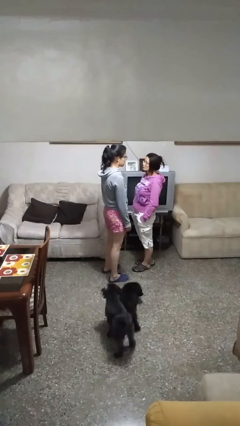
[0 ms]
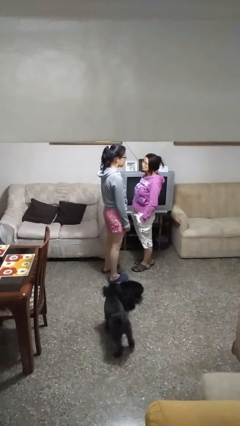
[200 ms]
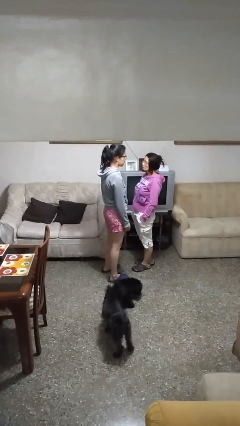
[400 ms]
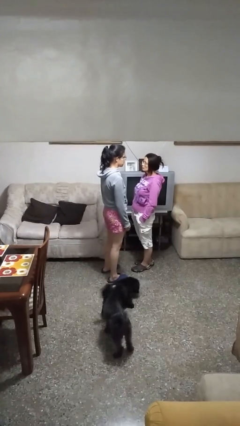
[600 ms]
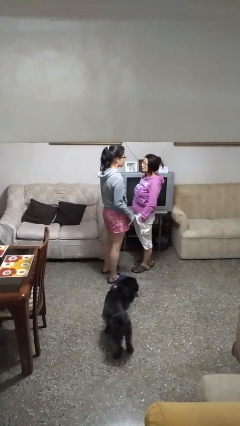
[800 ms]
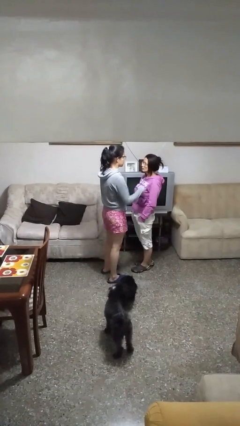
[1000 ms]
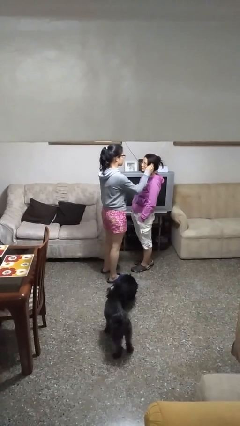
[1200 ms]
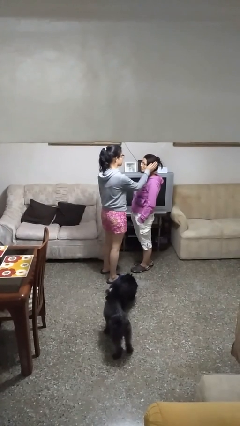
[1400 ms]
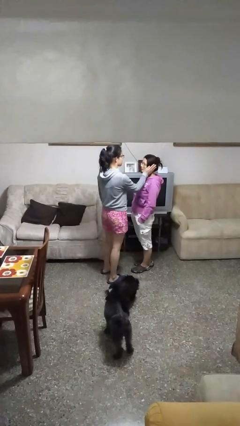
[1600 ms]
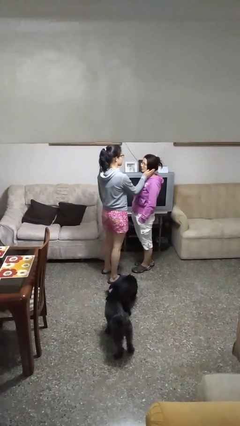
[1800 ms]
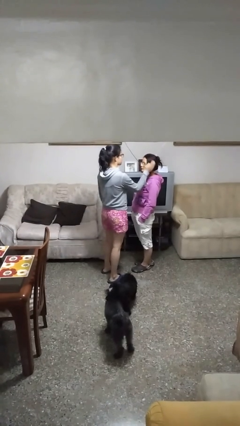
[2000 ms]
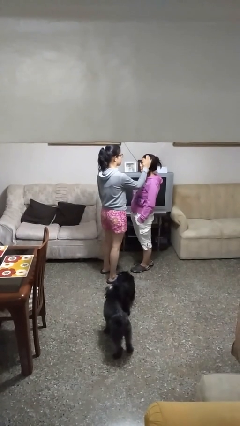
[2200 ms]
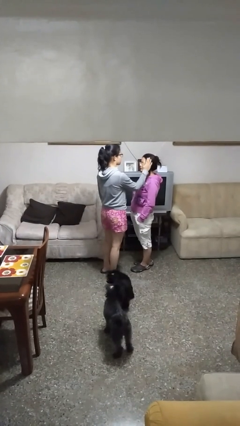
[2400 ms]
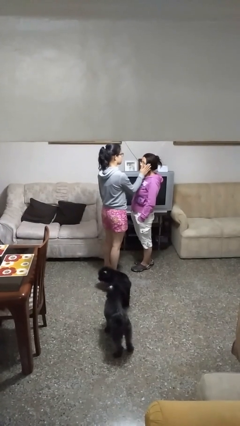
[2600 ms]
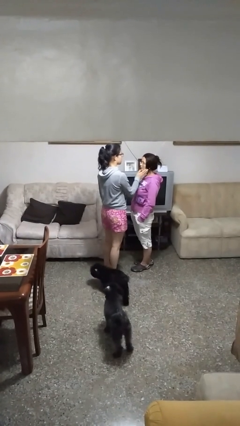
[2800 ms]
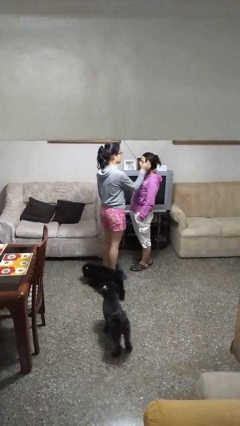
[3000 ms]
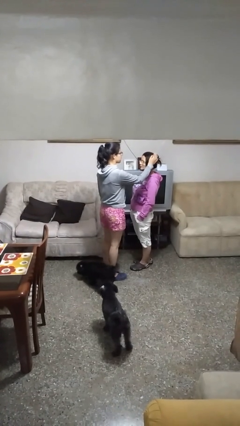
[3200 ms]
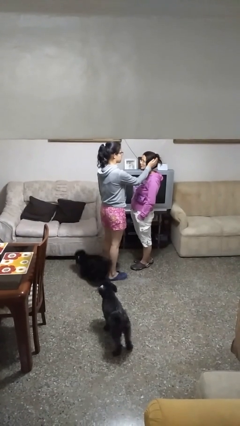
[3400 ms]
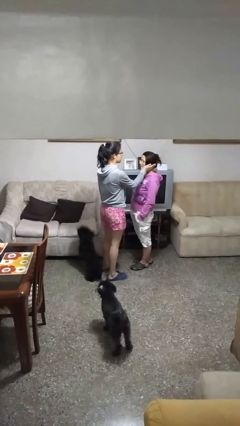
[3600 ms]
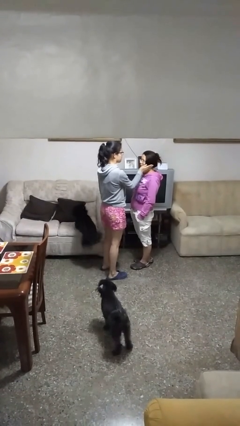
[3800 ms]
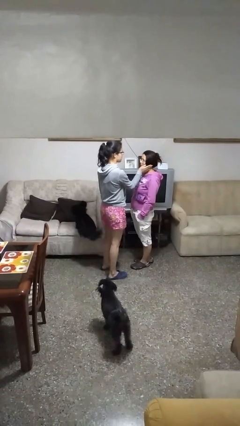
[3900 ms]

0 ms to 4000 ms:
person touches face of person

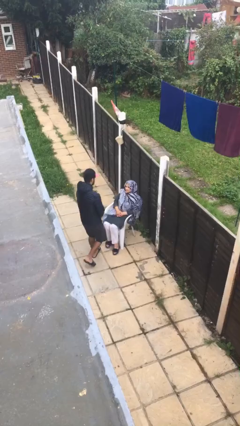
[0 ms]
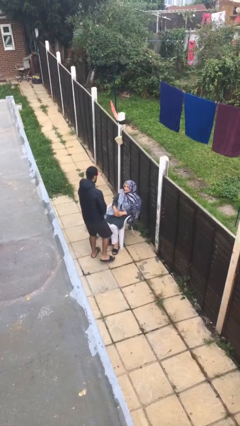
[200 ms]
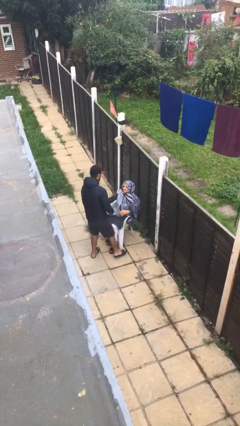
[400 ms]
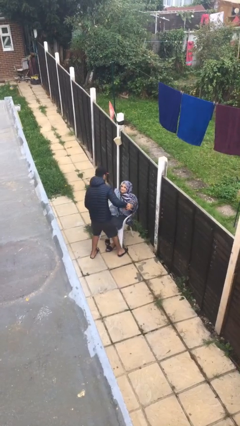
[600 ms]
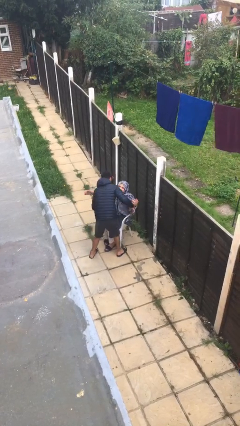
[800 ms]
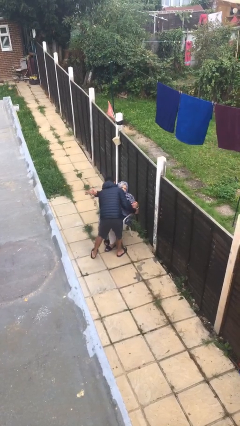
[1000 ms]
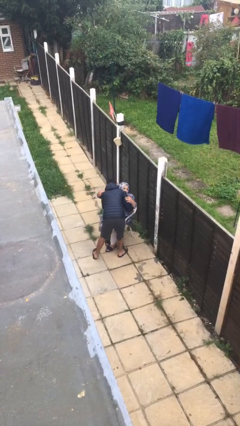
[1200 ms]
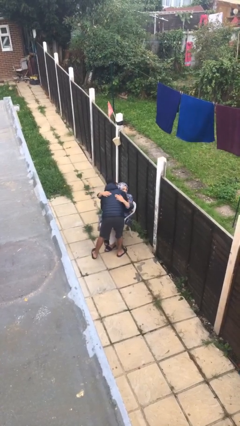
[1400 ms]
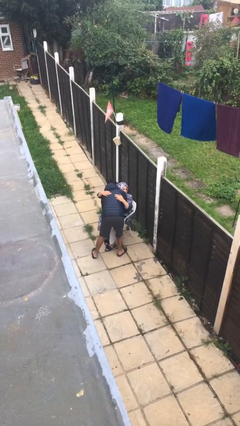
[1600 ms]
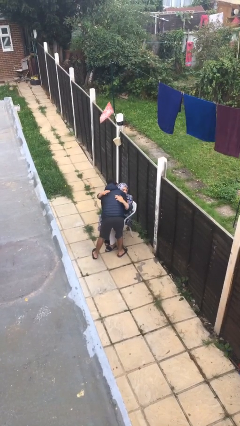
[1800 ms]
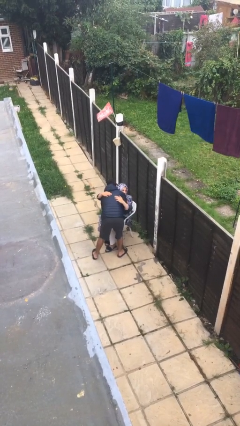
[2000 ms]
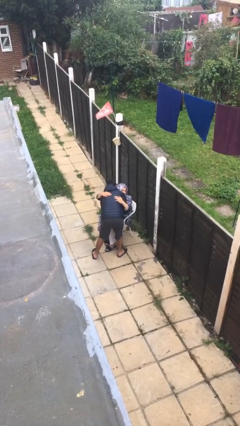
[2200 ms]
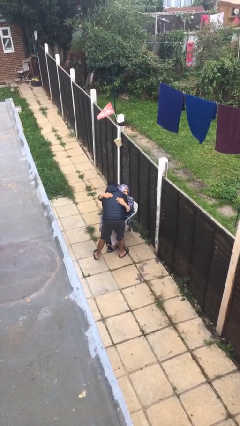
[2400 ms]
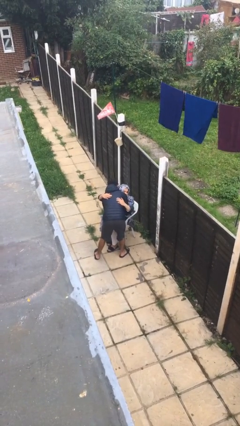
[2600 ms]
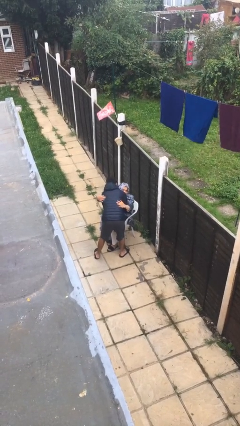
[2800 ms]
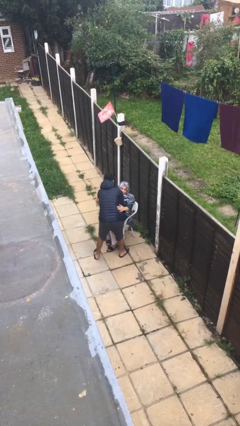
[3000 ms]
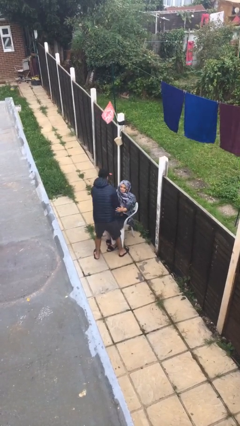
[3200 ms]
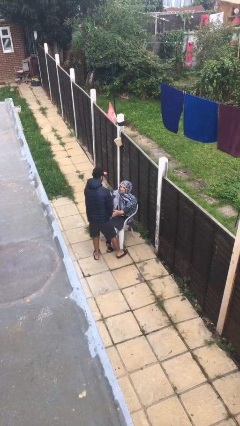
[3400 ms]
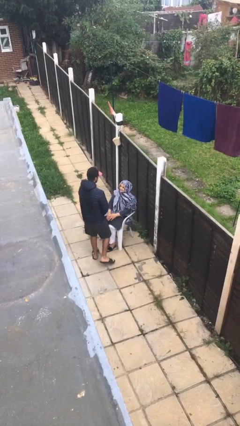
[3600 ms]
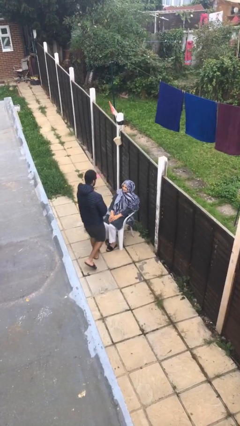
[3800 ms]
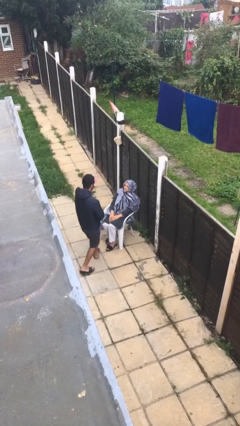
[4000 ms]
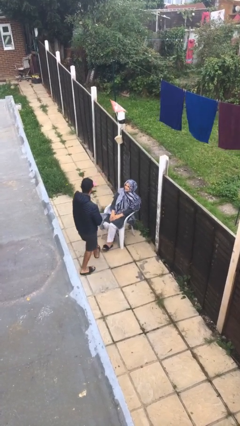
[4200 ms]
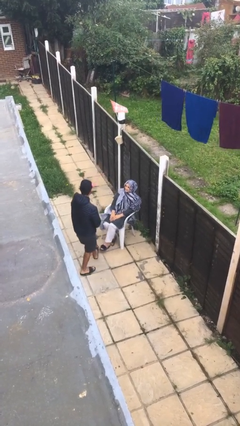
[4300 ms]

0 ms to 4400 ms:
person embraces person

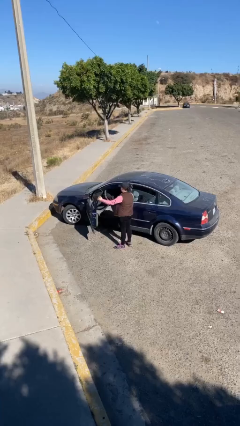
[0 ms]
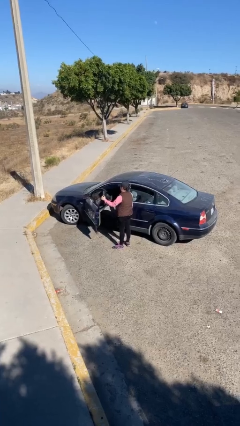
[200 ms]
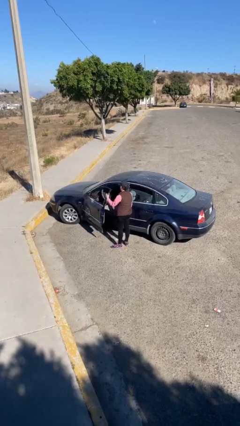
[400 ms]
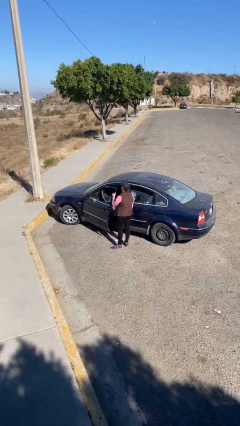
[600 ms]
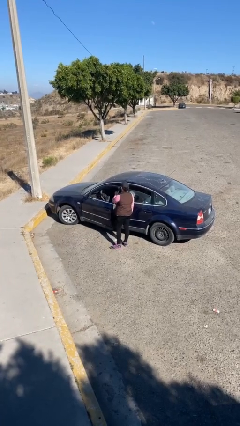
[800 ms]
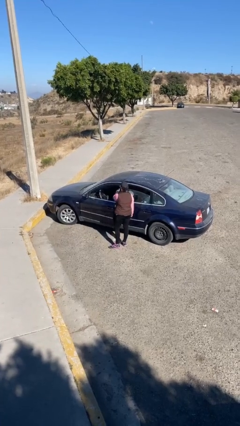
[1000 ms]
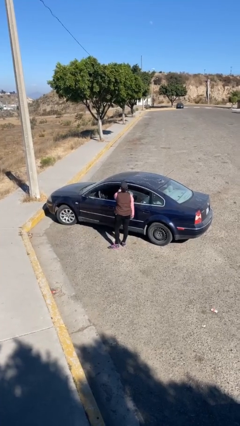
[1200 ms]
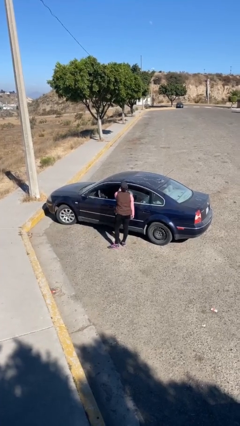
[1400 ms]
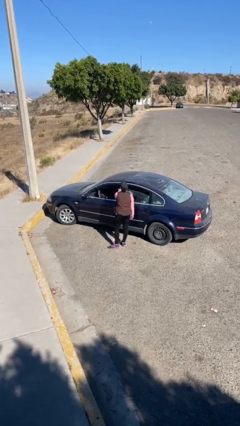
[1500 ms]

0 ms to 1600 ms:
person closes car door

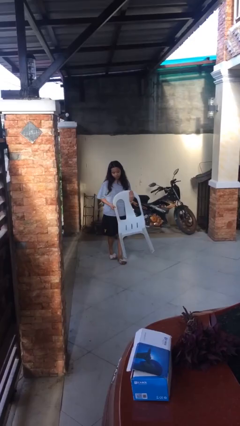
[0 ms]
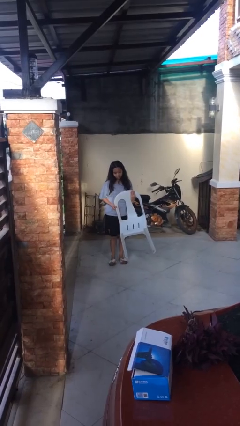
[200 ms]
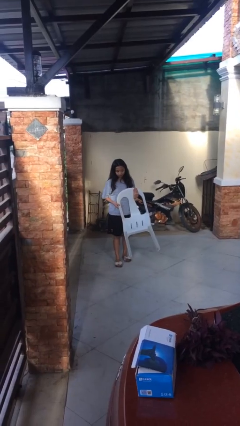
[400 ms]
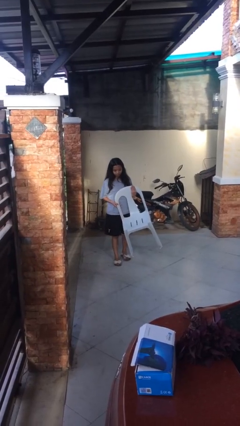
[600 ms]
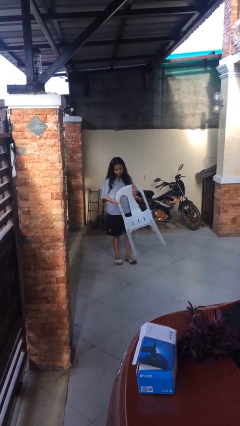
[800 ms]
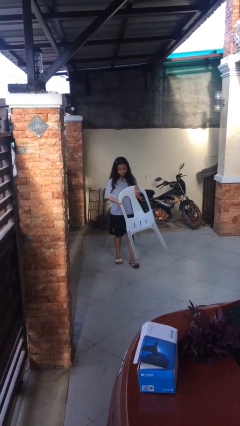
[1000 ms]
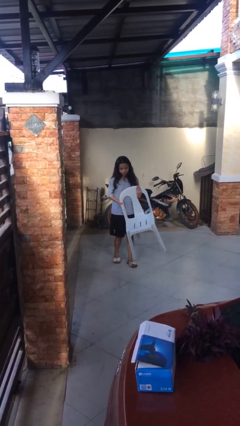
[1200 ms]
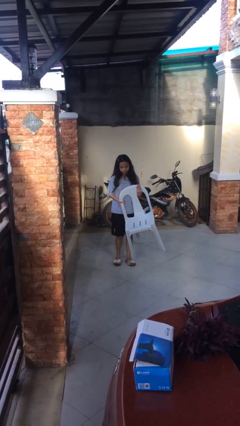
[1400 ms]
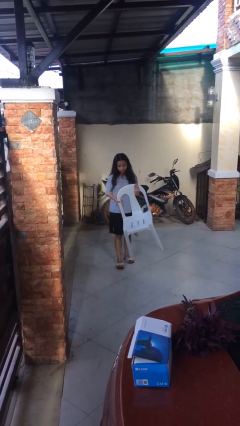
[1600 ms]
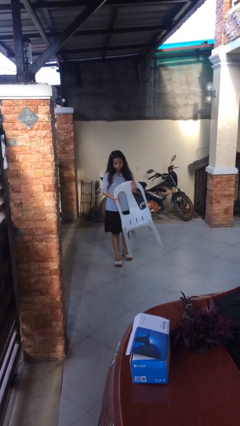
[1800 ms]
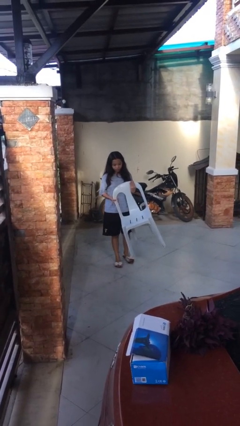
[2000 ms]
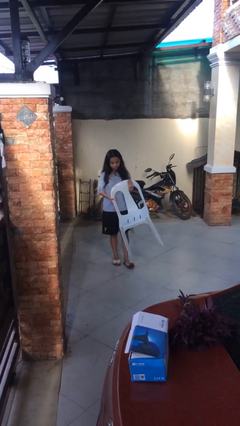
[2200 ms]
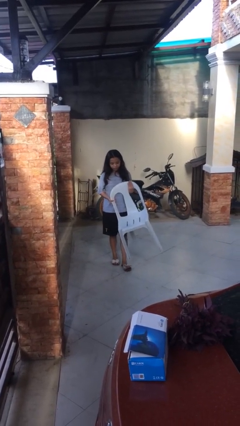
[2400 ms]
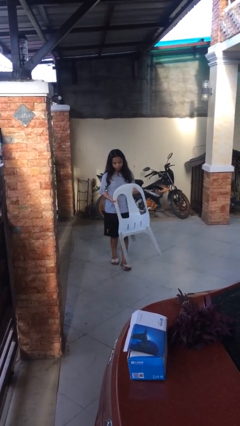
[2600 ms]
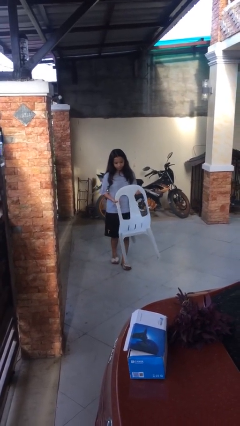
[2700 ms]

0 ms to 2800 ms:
person carries heavy object

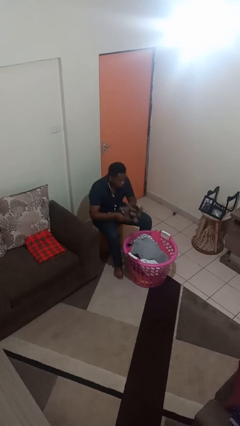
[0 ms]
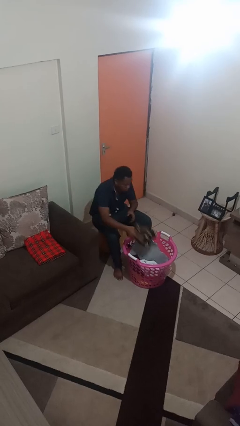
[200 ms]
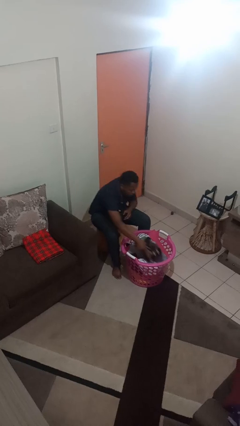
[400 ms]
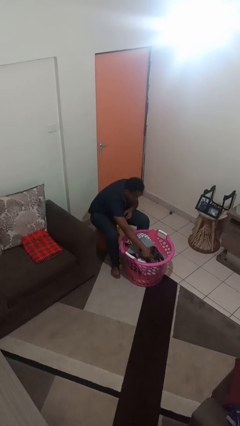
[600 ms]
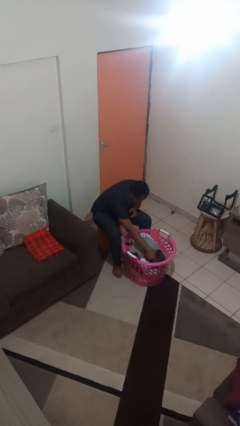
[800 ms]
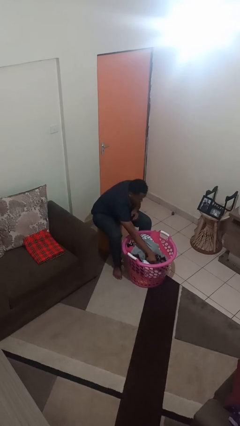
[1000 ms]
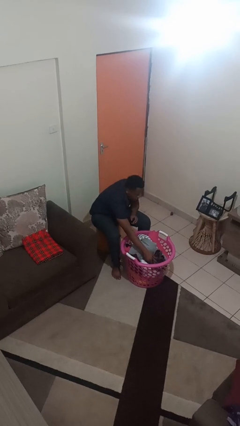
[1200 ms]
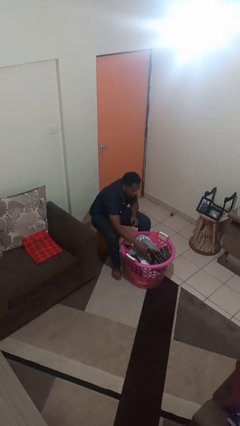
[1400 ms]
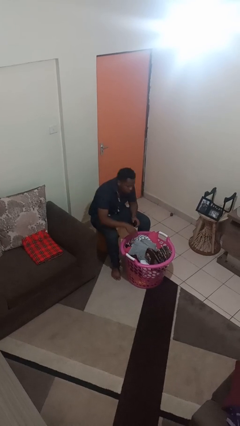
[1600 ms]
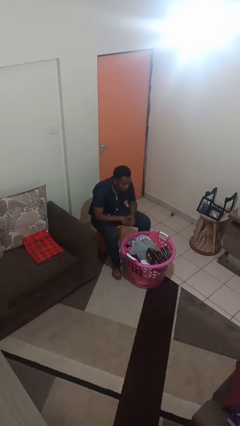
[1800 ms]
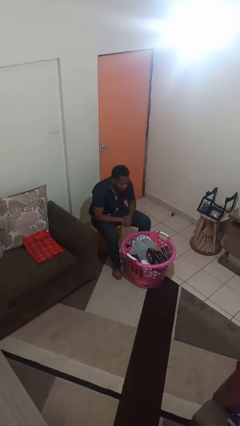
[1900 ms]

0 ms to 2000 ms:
person puts object into basket

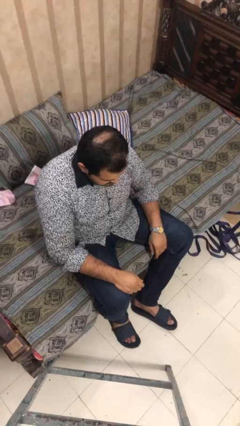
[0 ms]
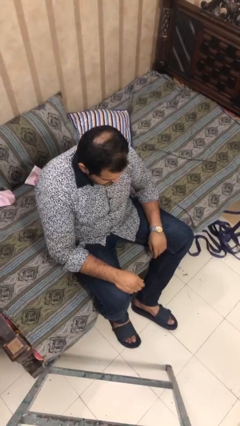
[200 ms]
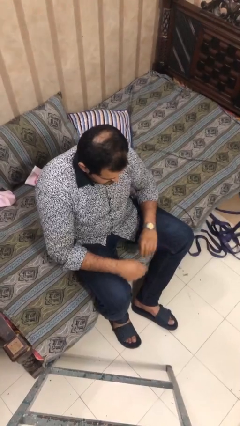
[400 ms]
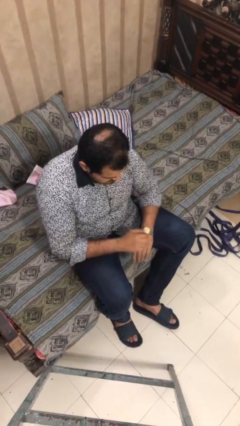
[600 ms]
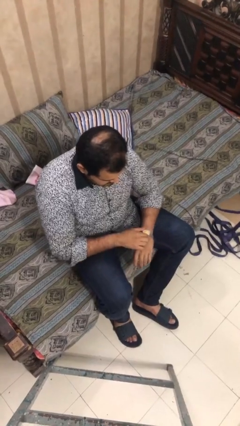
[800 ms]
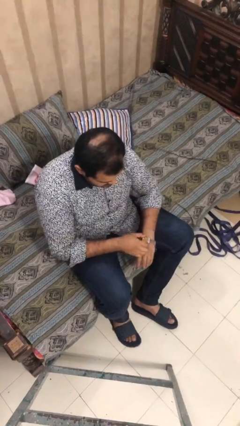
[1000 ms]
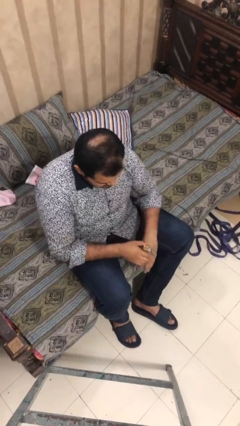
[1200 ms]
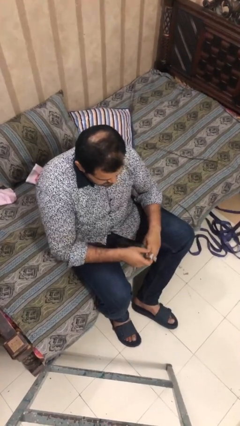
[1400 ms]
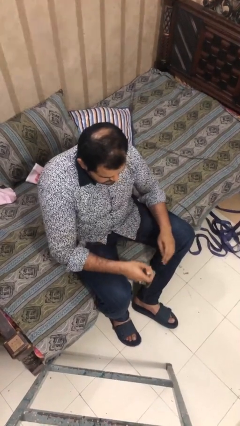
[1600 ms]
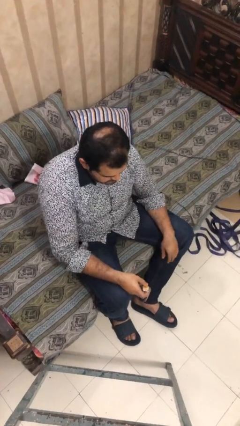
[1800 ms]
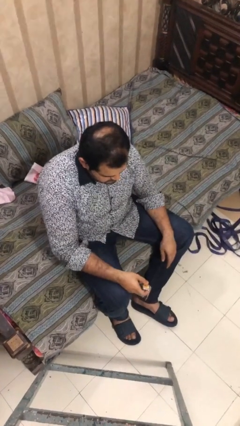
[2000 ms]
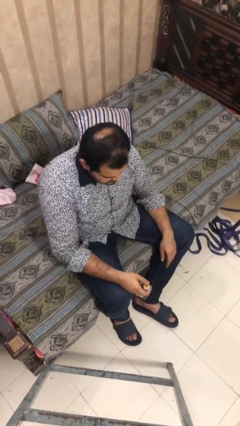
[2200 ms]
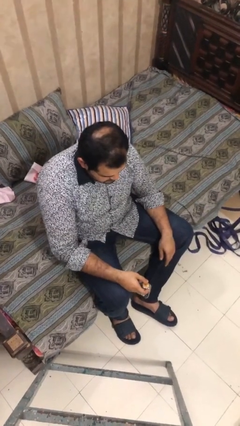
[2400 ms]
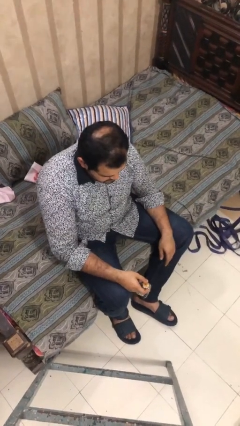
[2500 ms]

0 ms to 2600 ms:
person takes off wristwatch

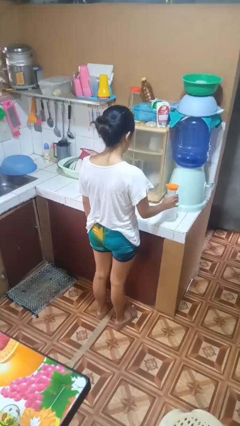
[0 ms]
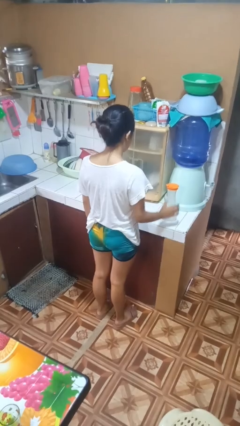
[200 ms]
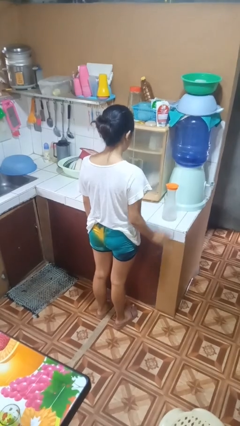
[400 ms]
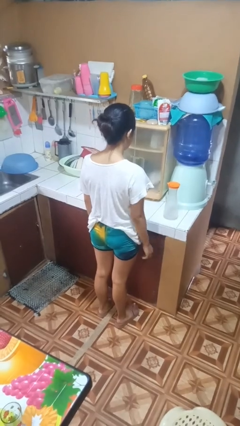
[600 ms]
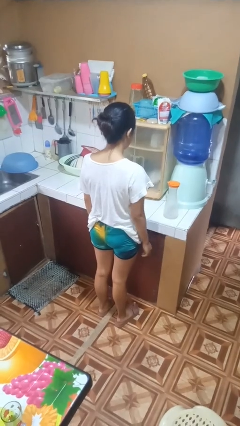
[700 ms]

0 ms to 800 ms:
person puts down object on countertop
